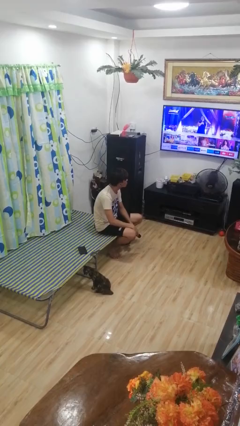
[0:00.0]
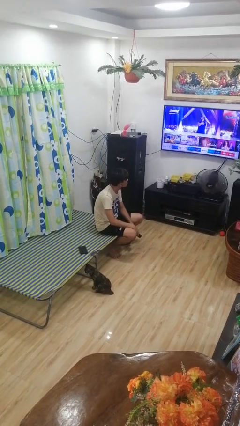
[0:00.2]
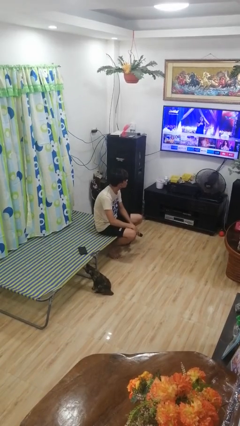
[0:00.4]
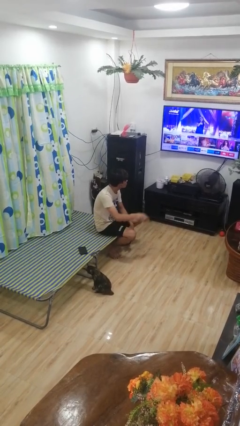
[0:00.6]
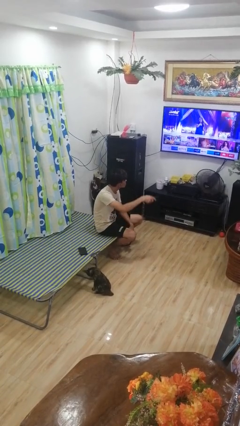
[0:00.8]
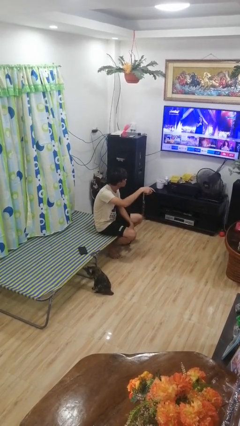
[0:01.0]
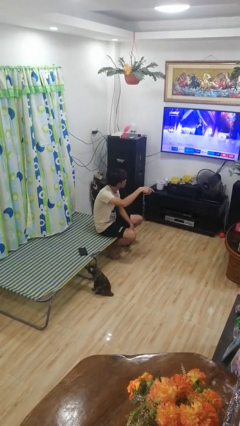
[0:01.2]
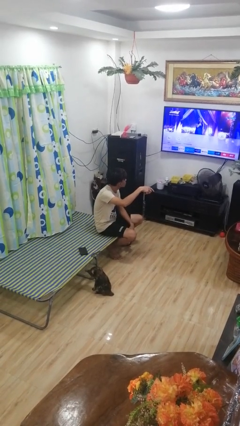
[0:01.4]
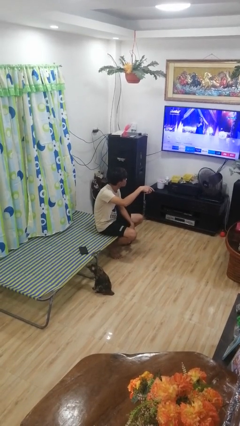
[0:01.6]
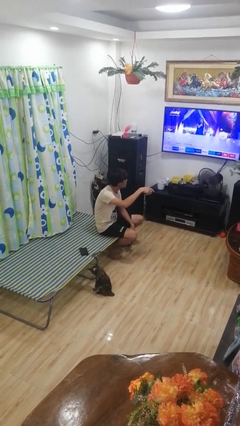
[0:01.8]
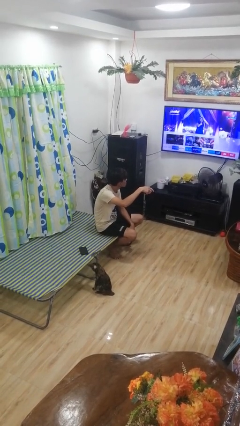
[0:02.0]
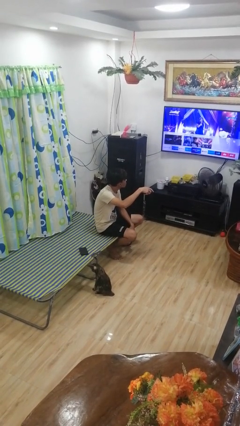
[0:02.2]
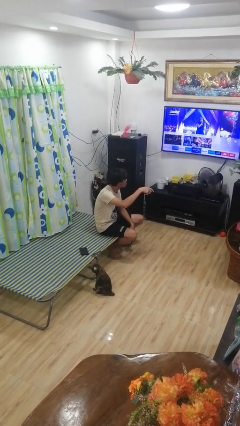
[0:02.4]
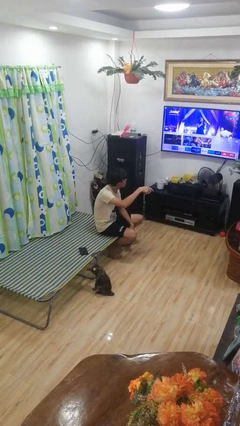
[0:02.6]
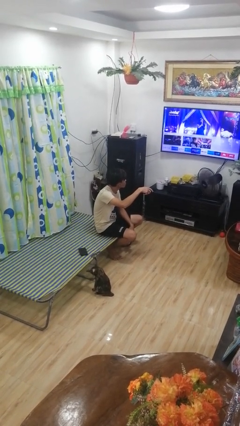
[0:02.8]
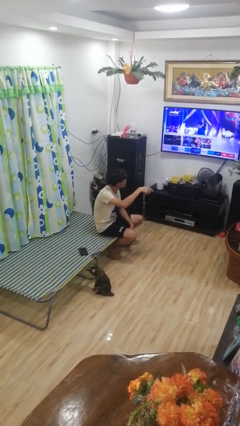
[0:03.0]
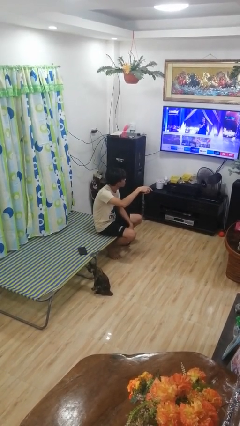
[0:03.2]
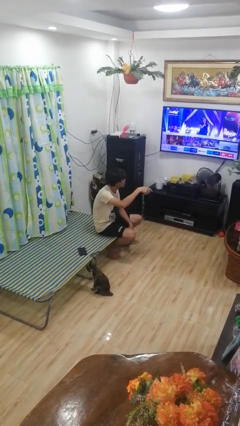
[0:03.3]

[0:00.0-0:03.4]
person uses television remote

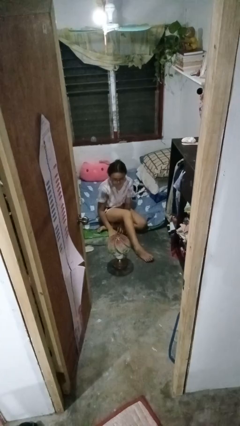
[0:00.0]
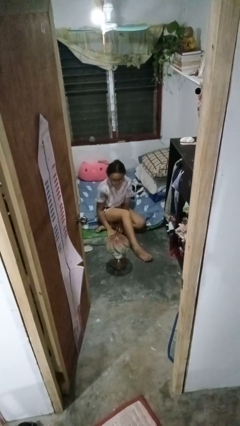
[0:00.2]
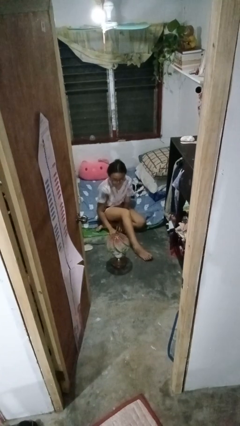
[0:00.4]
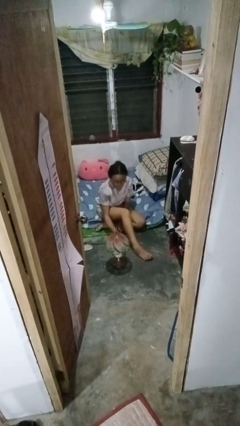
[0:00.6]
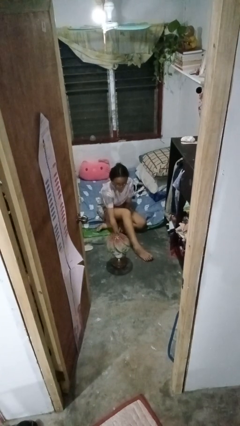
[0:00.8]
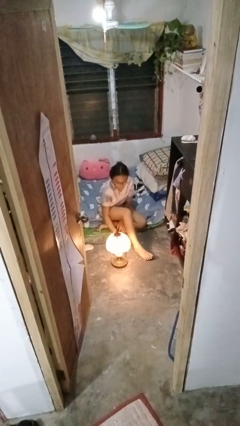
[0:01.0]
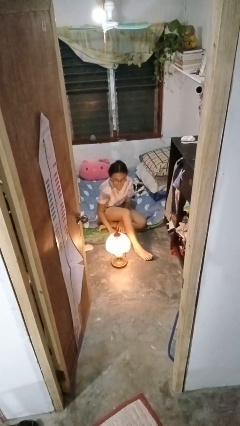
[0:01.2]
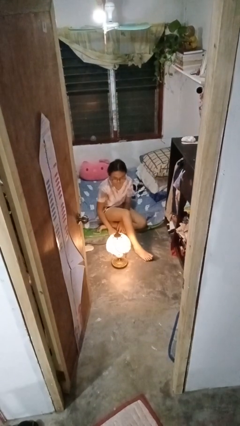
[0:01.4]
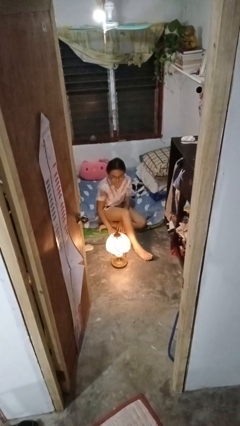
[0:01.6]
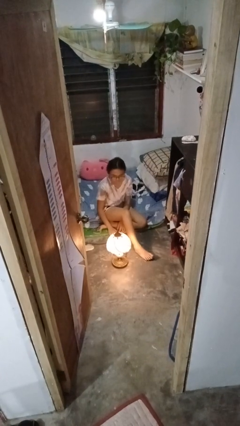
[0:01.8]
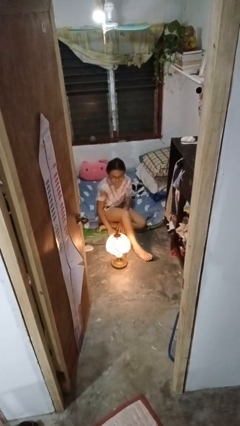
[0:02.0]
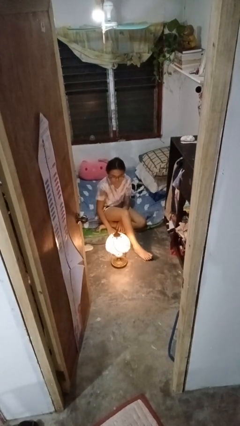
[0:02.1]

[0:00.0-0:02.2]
person turns on lamp

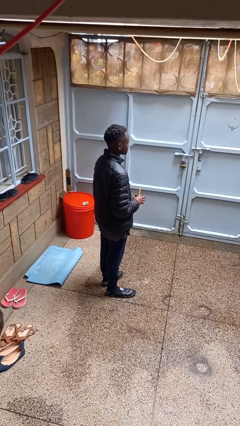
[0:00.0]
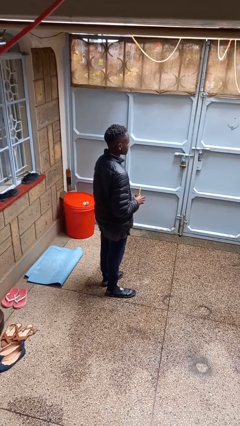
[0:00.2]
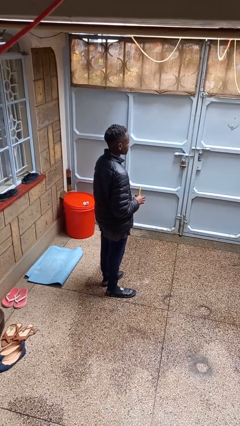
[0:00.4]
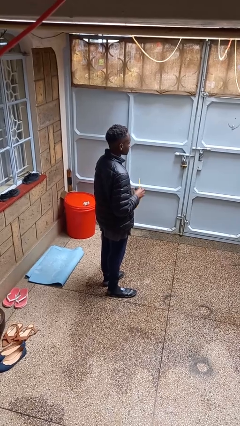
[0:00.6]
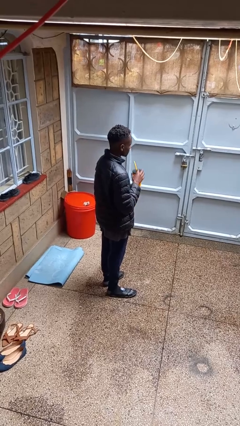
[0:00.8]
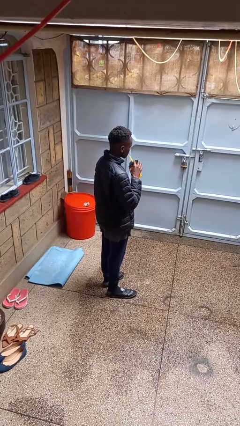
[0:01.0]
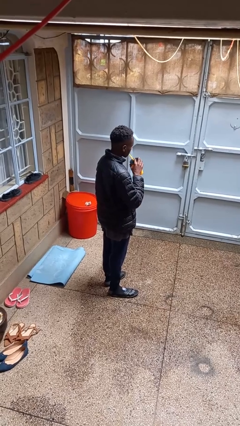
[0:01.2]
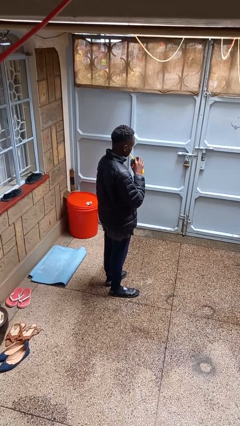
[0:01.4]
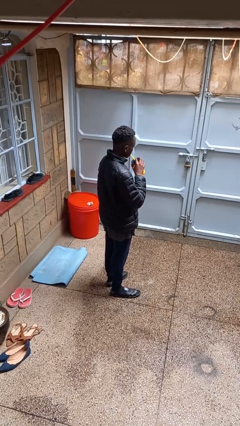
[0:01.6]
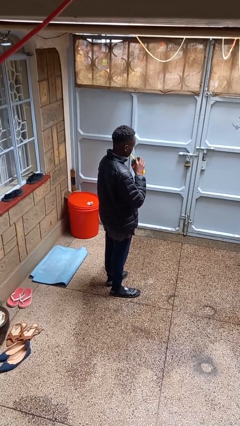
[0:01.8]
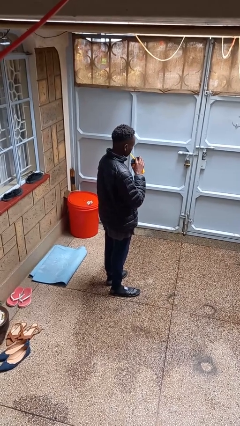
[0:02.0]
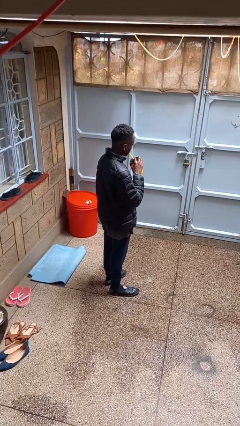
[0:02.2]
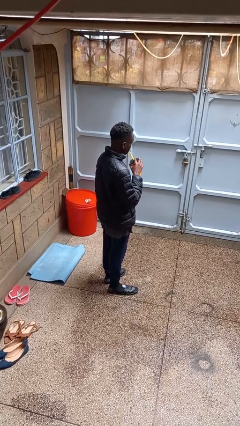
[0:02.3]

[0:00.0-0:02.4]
person drinks from straw

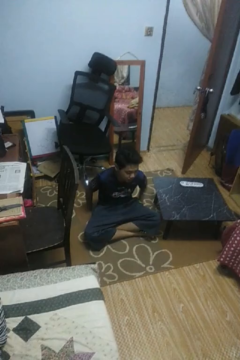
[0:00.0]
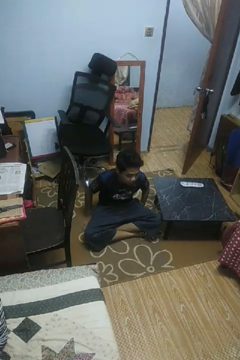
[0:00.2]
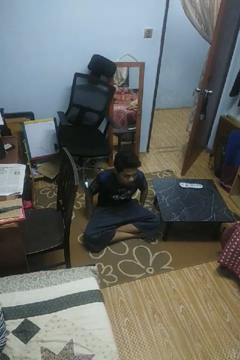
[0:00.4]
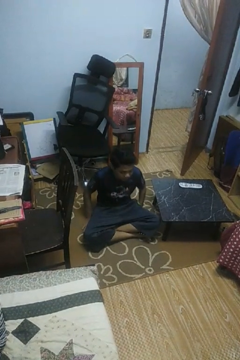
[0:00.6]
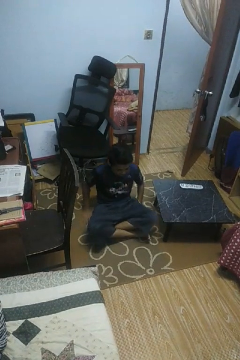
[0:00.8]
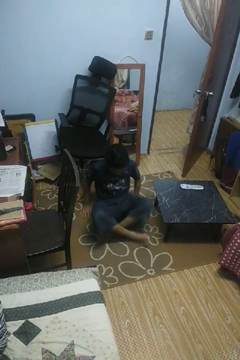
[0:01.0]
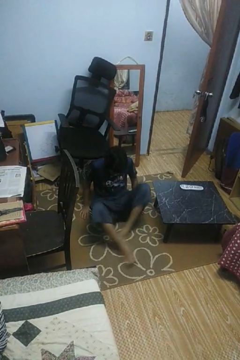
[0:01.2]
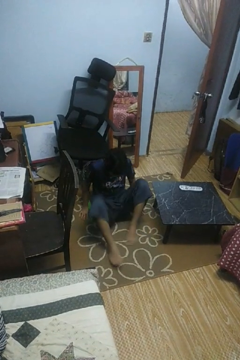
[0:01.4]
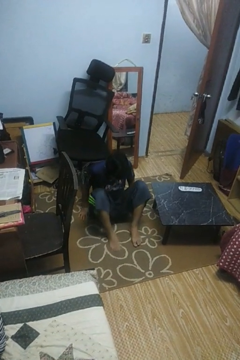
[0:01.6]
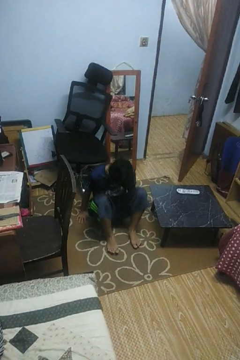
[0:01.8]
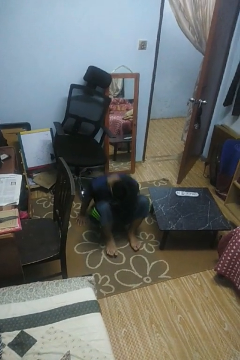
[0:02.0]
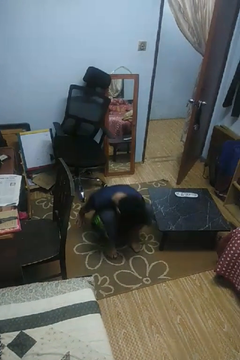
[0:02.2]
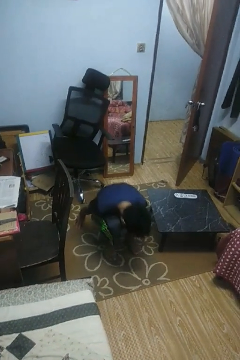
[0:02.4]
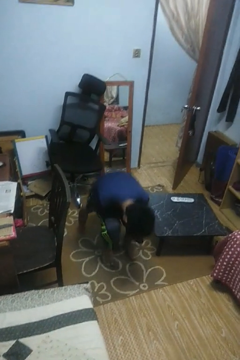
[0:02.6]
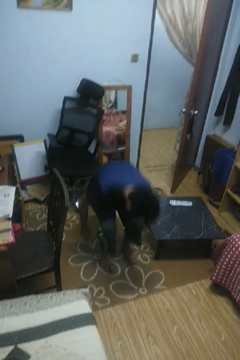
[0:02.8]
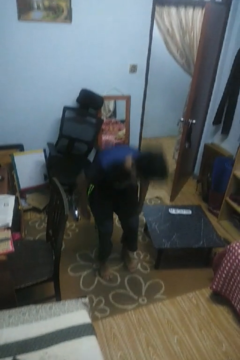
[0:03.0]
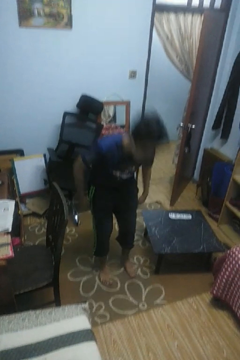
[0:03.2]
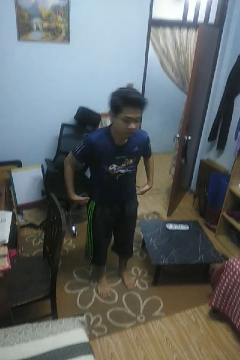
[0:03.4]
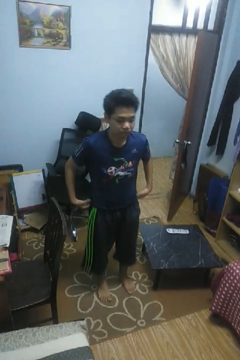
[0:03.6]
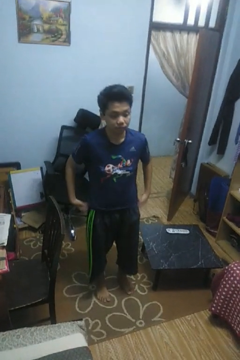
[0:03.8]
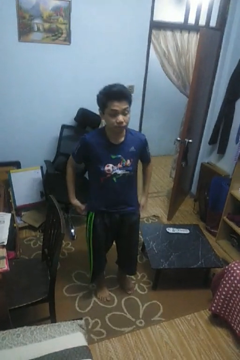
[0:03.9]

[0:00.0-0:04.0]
person stands up from floor

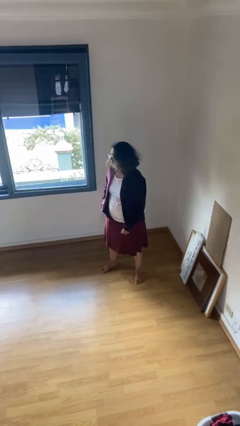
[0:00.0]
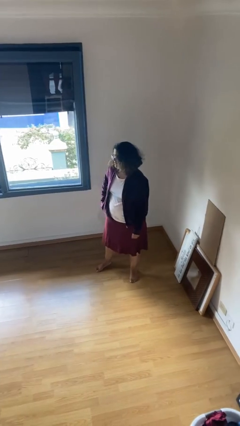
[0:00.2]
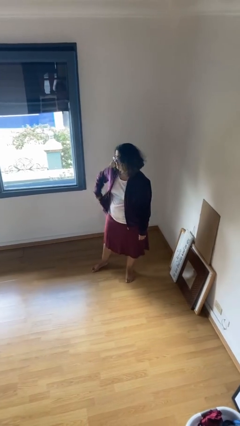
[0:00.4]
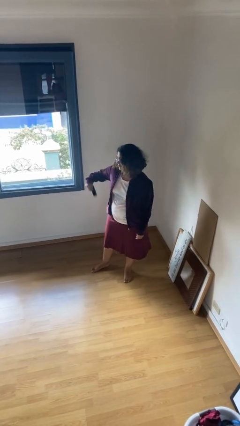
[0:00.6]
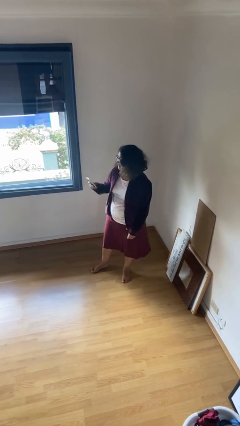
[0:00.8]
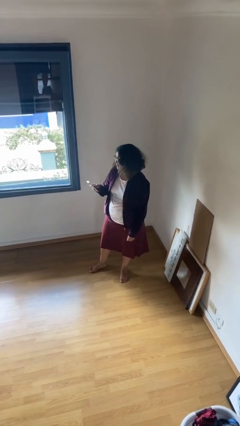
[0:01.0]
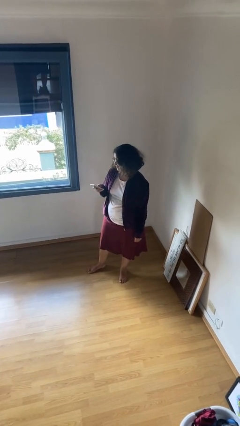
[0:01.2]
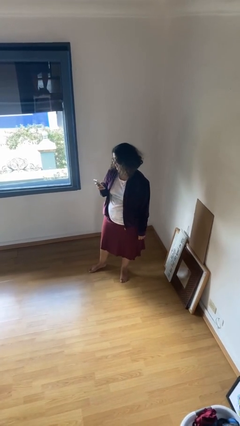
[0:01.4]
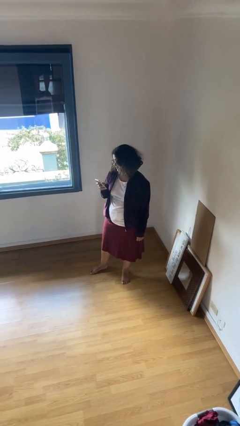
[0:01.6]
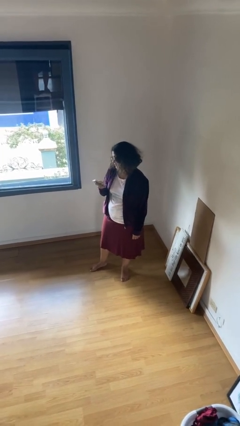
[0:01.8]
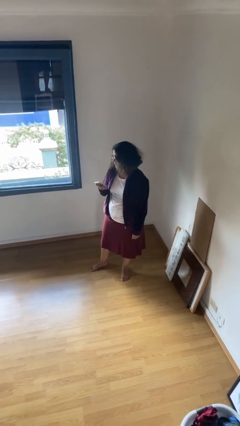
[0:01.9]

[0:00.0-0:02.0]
person takes phone from pocket

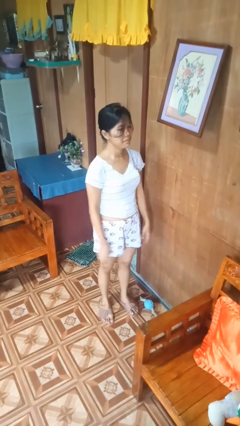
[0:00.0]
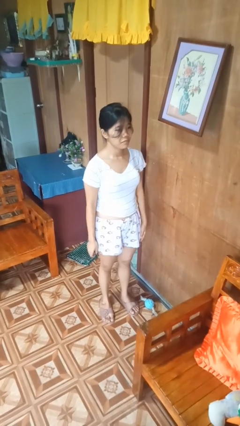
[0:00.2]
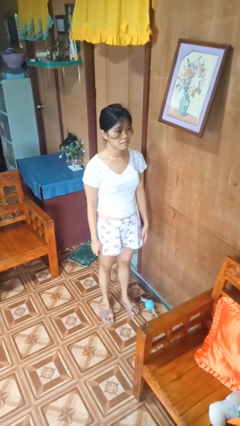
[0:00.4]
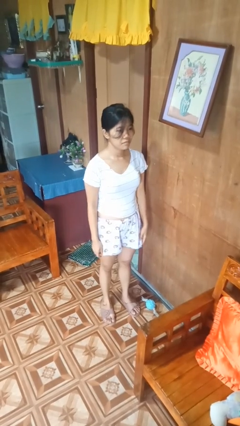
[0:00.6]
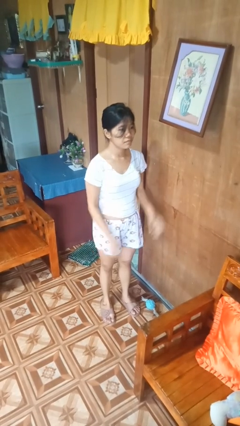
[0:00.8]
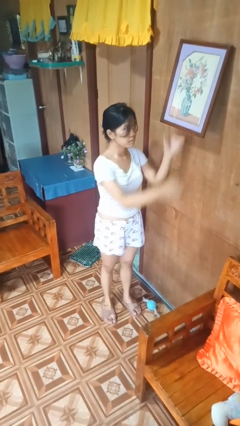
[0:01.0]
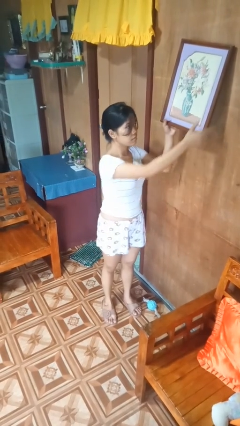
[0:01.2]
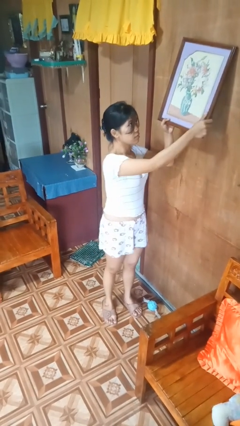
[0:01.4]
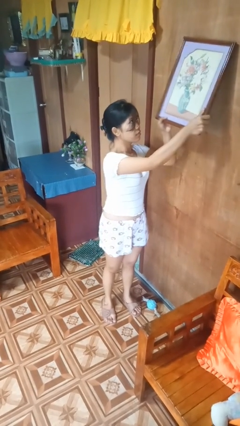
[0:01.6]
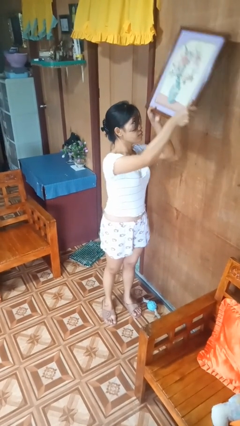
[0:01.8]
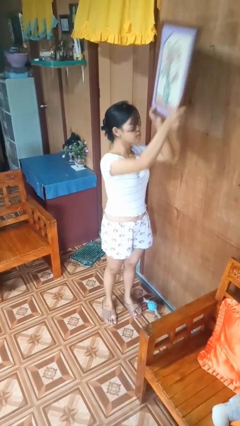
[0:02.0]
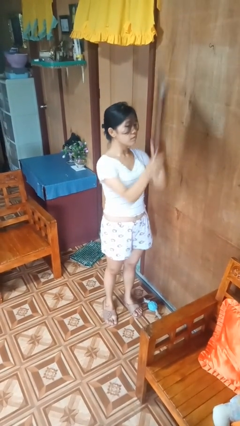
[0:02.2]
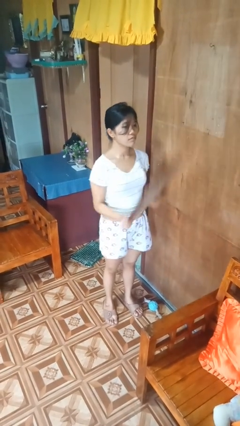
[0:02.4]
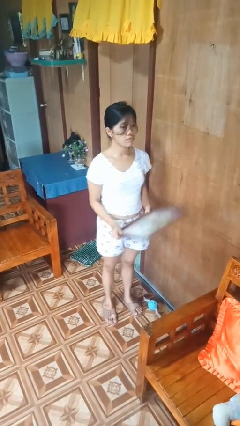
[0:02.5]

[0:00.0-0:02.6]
person takes down picture frame

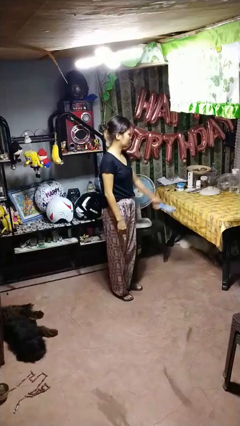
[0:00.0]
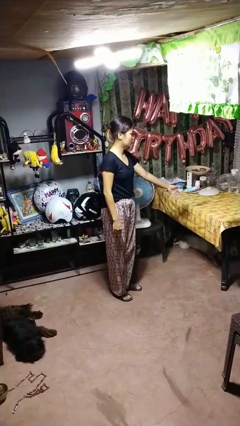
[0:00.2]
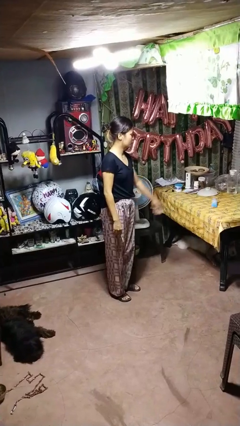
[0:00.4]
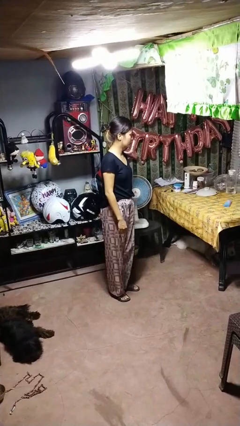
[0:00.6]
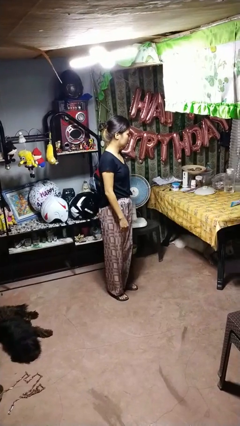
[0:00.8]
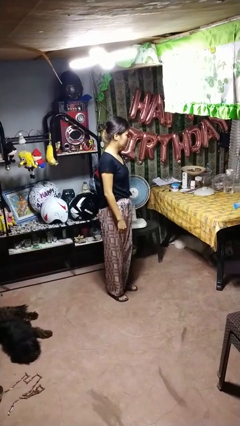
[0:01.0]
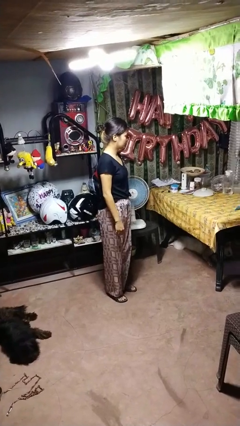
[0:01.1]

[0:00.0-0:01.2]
person throws object on table
